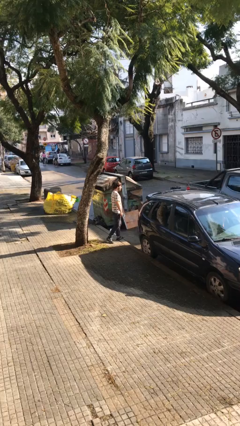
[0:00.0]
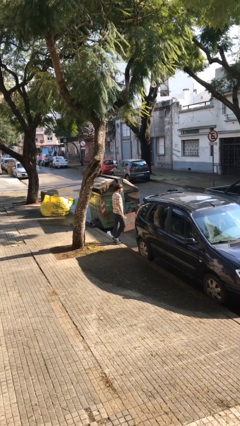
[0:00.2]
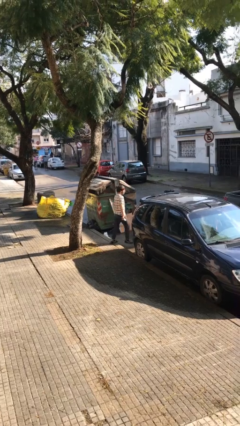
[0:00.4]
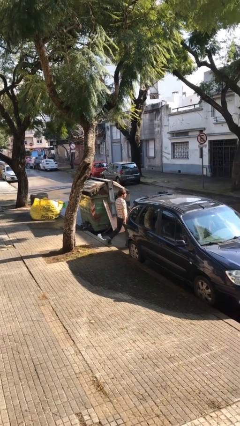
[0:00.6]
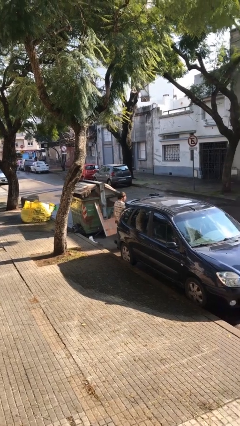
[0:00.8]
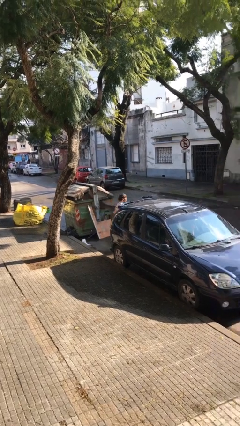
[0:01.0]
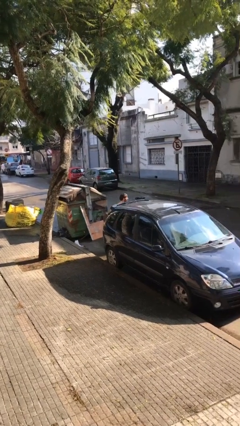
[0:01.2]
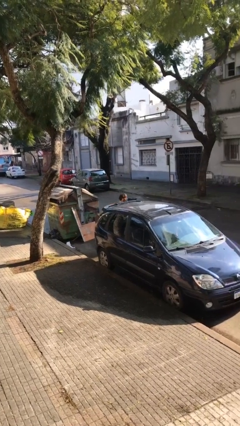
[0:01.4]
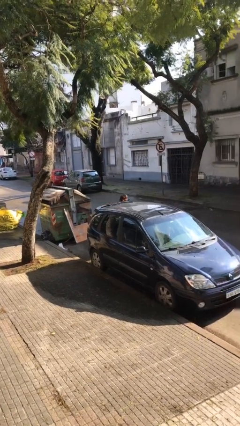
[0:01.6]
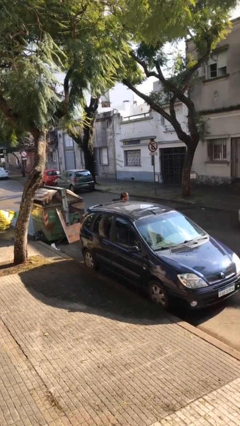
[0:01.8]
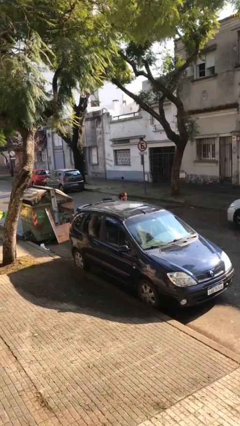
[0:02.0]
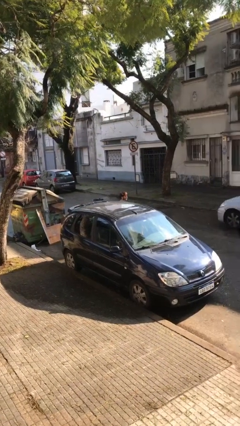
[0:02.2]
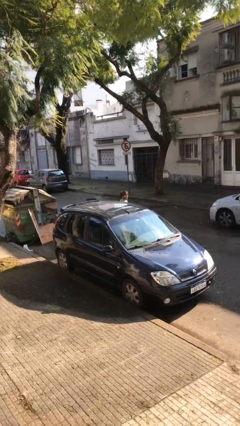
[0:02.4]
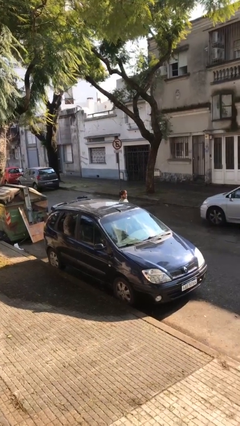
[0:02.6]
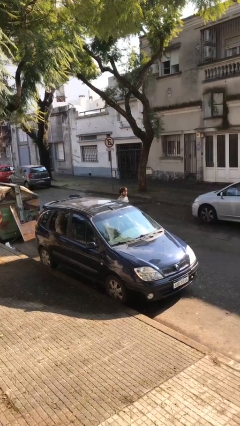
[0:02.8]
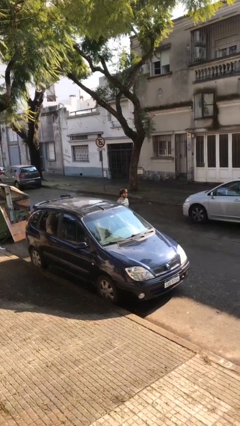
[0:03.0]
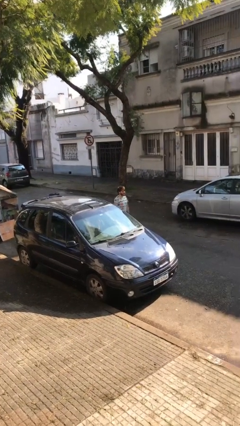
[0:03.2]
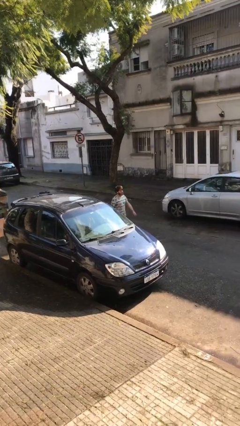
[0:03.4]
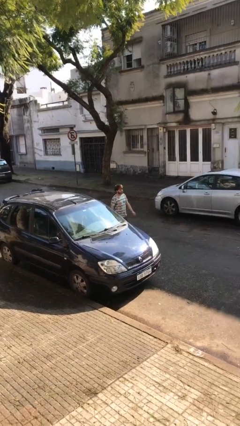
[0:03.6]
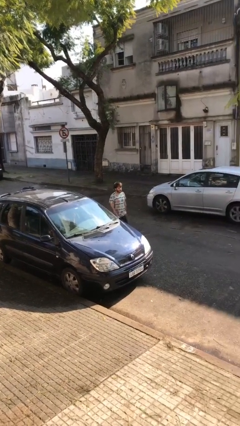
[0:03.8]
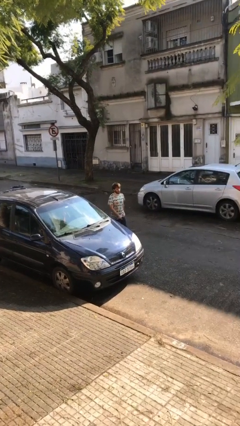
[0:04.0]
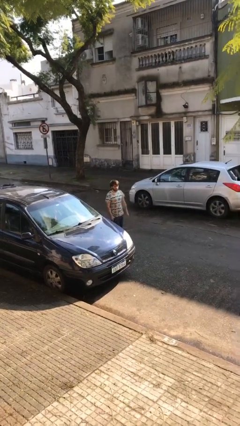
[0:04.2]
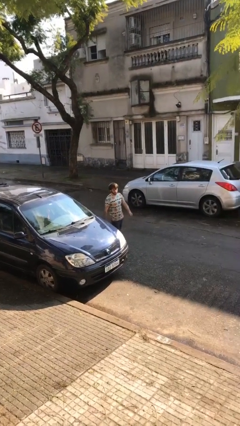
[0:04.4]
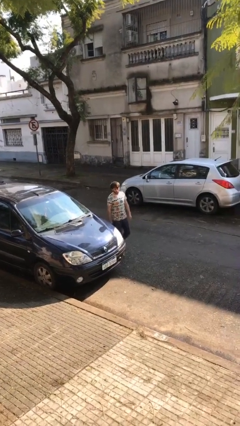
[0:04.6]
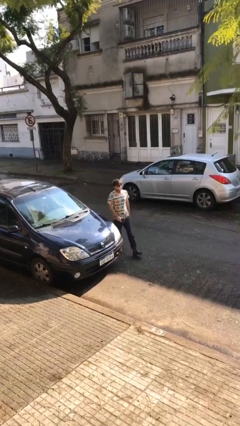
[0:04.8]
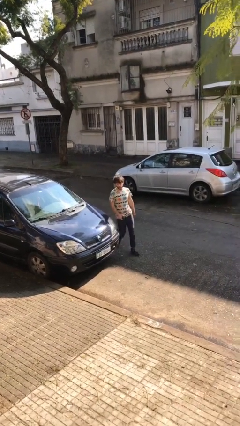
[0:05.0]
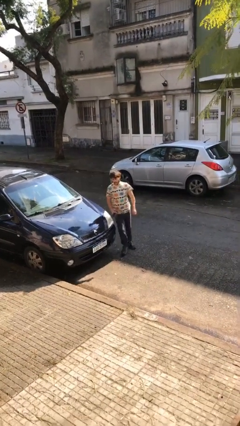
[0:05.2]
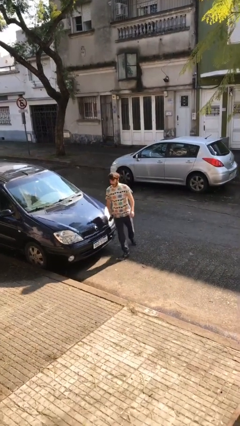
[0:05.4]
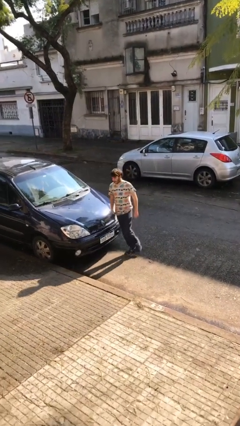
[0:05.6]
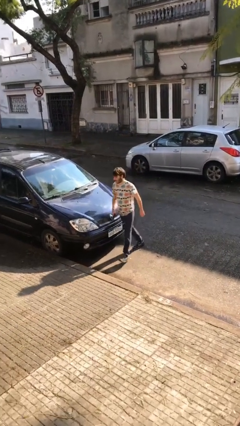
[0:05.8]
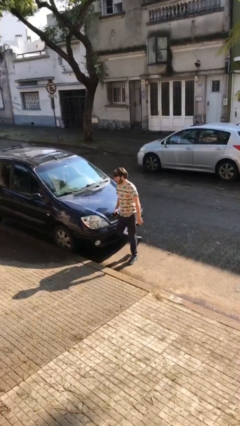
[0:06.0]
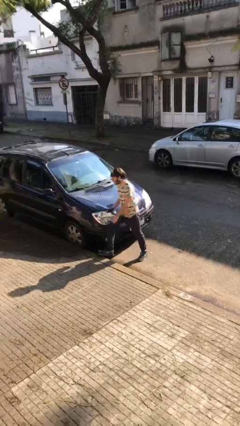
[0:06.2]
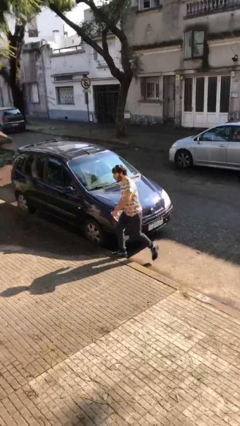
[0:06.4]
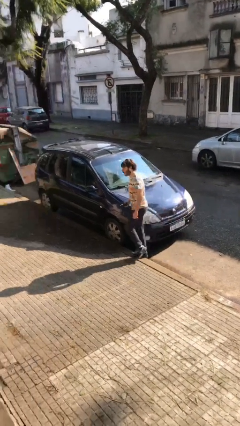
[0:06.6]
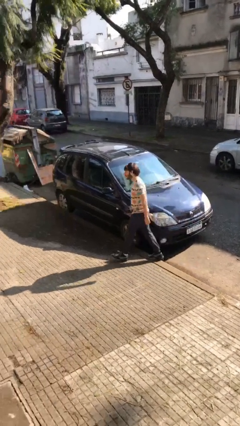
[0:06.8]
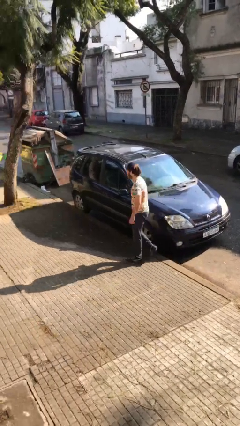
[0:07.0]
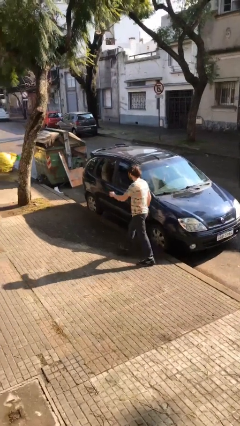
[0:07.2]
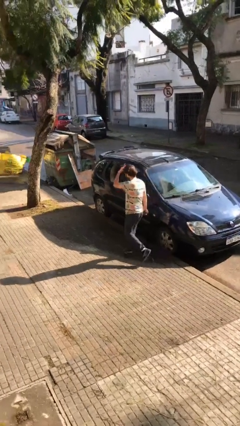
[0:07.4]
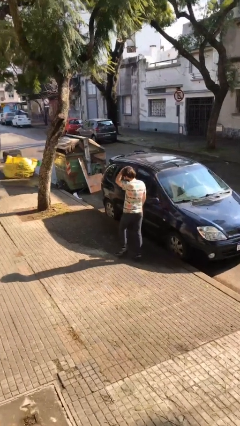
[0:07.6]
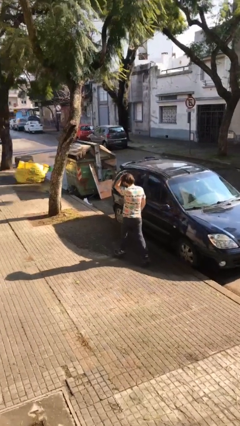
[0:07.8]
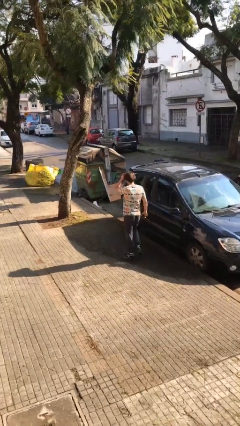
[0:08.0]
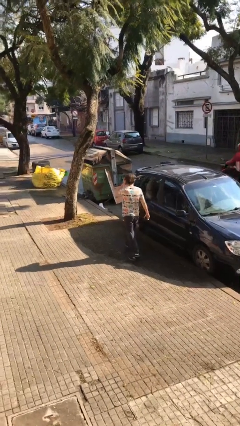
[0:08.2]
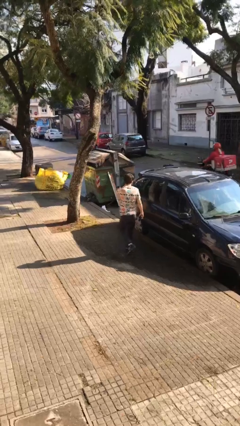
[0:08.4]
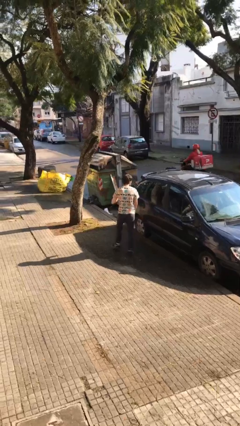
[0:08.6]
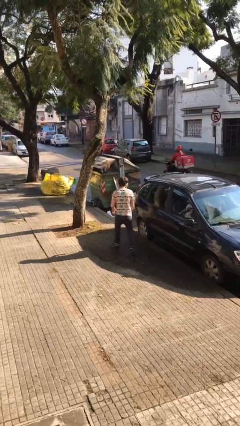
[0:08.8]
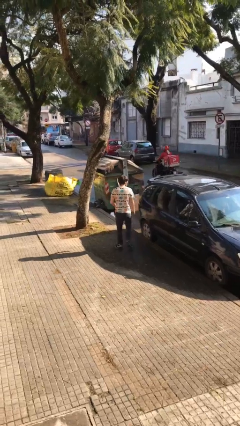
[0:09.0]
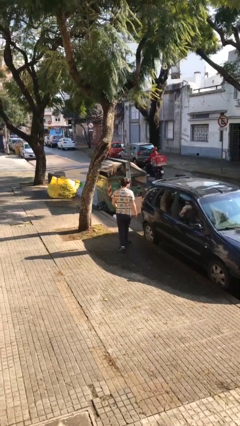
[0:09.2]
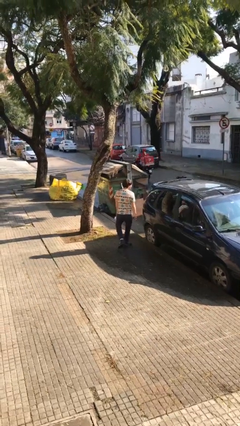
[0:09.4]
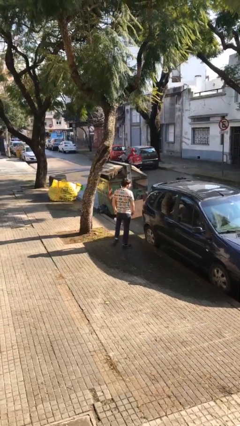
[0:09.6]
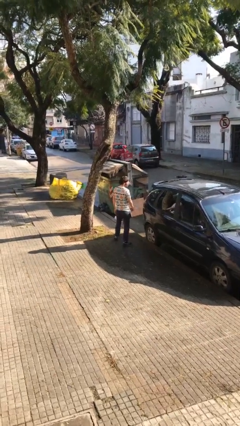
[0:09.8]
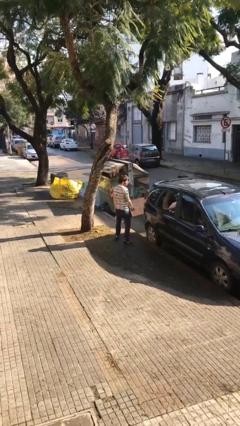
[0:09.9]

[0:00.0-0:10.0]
person walks around car

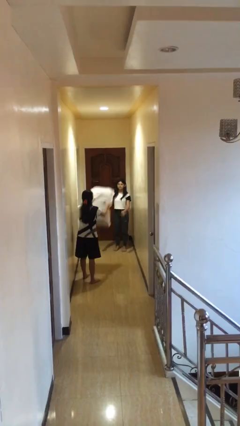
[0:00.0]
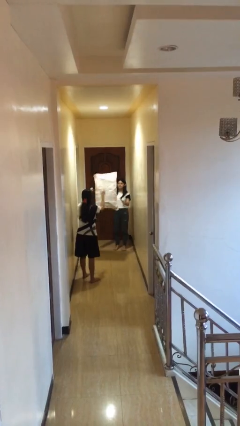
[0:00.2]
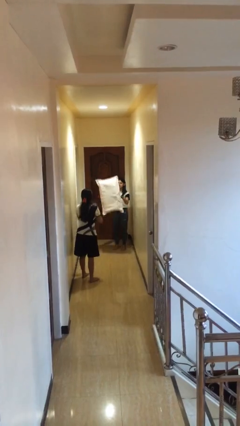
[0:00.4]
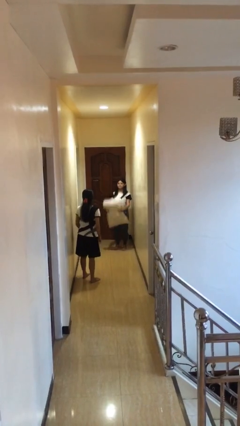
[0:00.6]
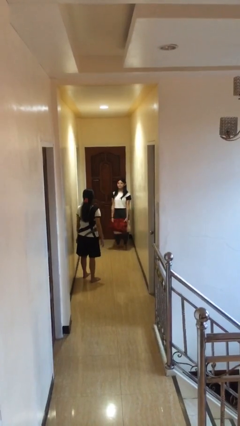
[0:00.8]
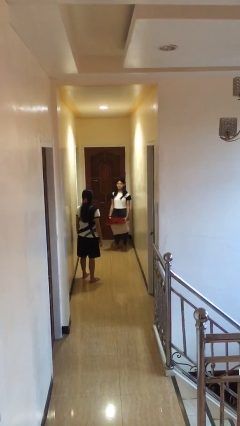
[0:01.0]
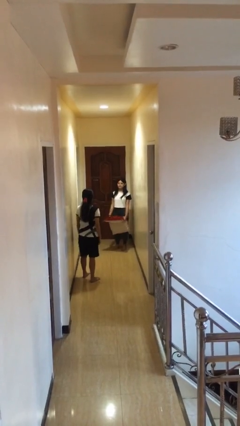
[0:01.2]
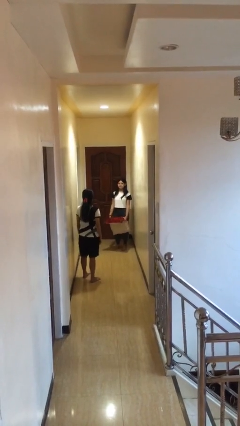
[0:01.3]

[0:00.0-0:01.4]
person catches object from person

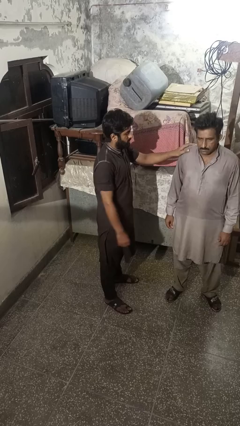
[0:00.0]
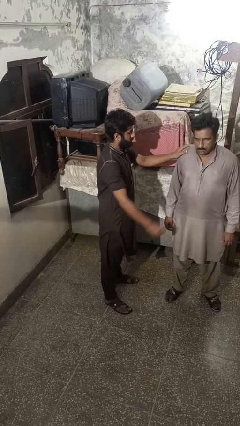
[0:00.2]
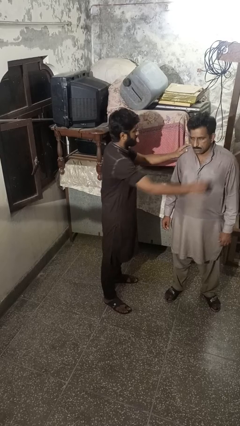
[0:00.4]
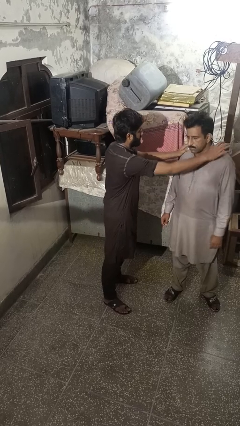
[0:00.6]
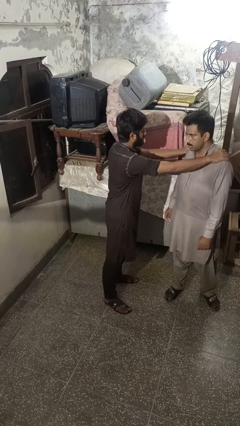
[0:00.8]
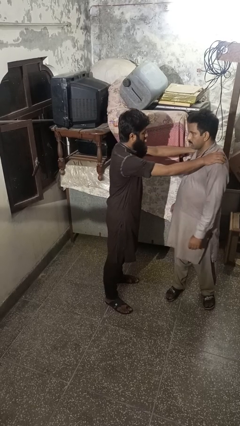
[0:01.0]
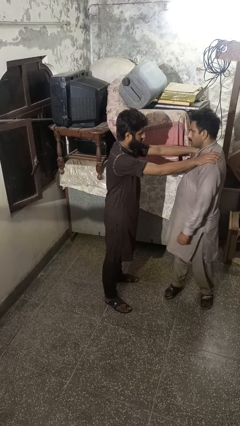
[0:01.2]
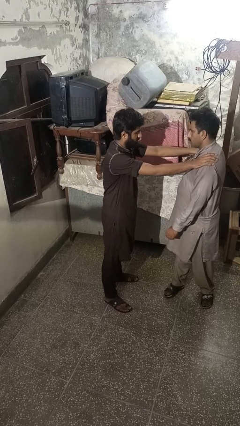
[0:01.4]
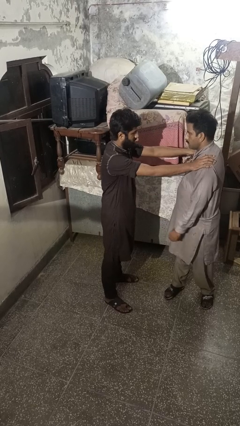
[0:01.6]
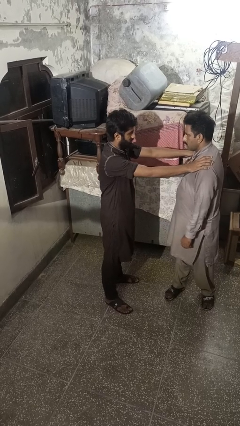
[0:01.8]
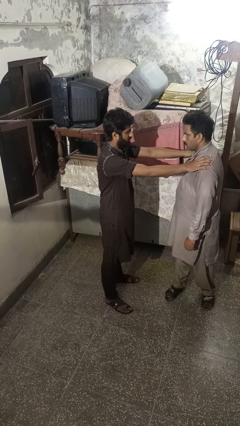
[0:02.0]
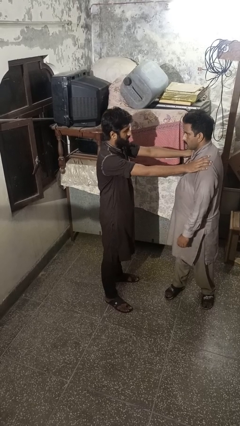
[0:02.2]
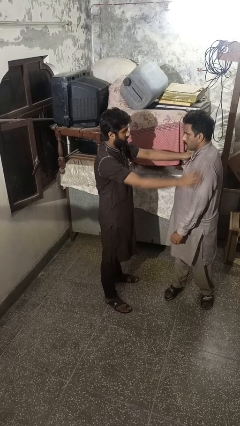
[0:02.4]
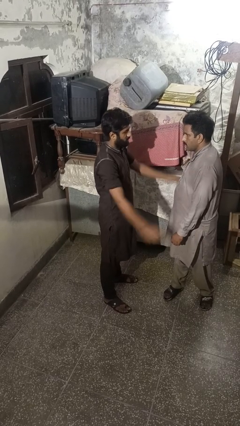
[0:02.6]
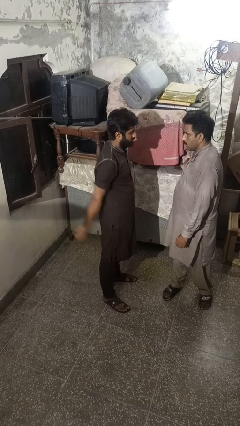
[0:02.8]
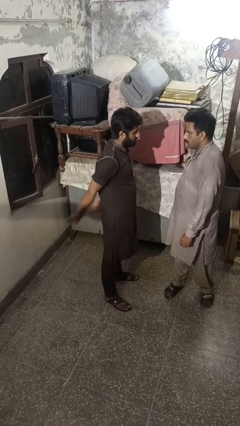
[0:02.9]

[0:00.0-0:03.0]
person spins person around

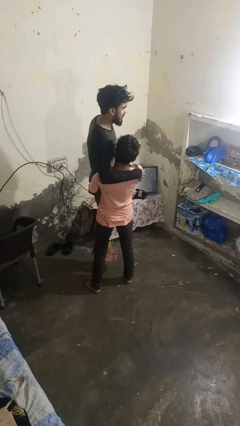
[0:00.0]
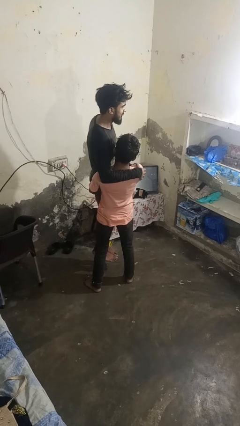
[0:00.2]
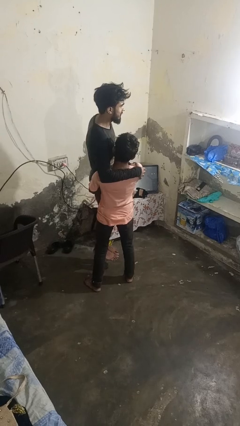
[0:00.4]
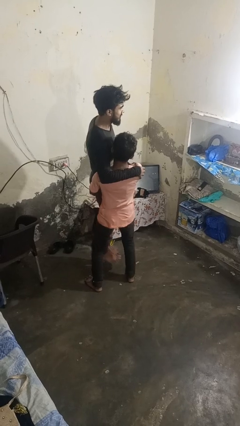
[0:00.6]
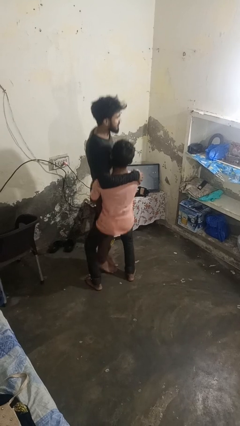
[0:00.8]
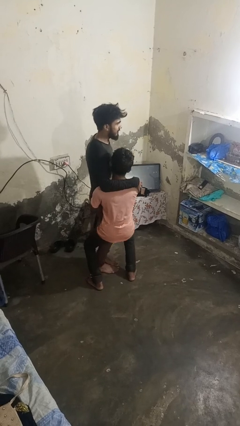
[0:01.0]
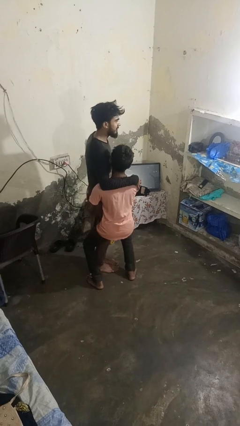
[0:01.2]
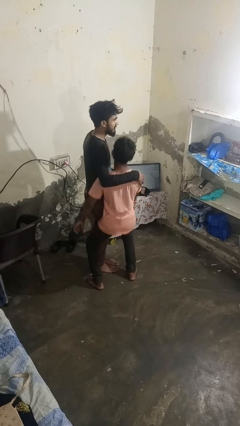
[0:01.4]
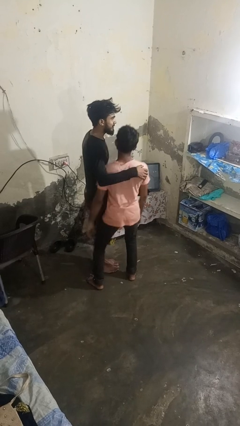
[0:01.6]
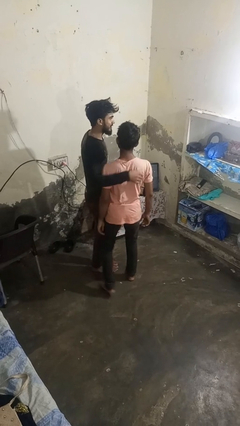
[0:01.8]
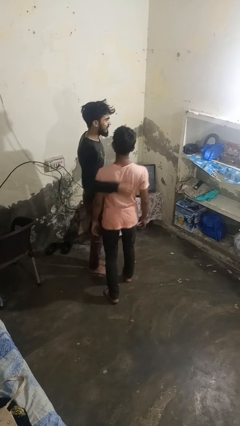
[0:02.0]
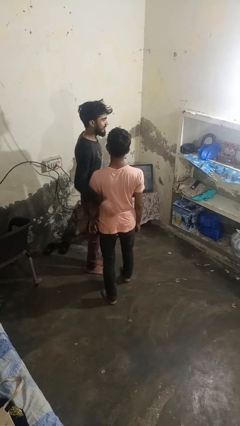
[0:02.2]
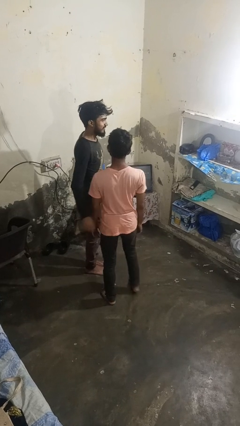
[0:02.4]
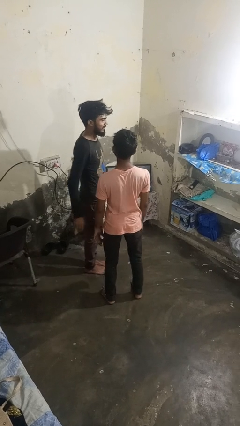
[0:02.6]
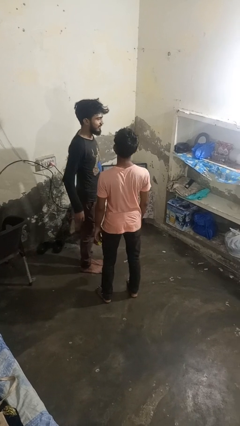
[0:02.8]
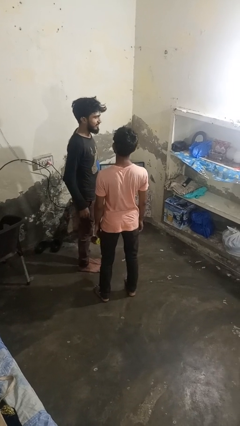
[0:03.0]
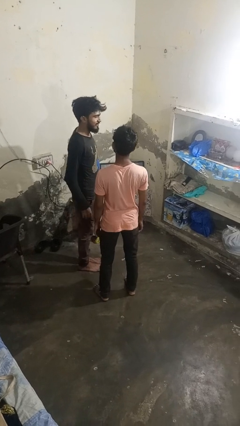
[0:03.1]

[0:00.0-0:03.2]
person puts down person
